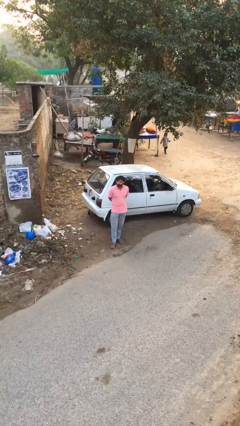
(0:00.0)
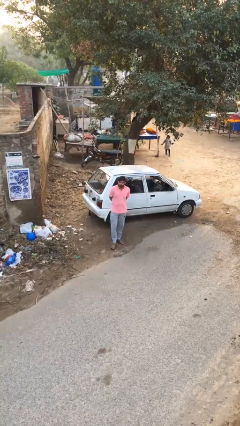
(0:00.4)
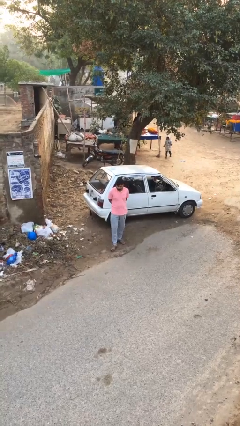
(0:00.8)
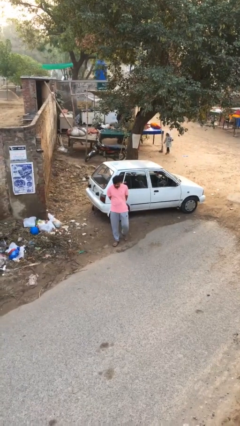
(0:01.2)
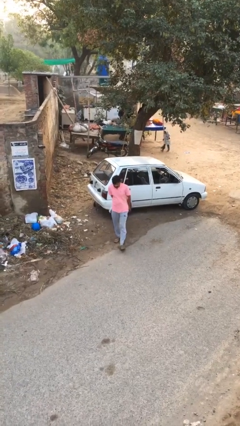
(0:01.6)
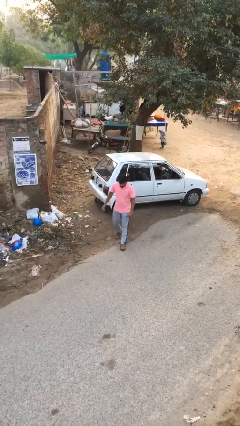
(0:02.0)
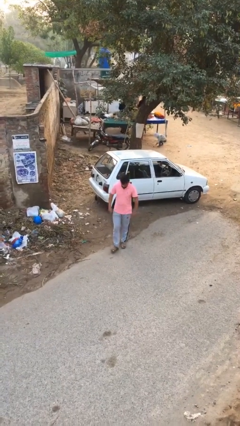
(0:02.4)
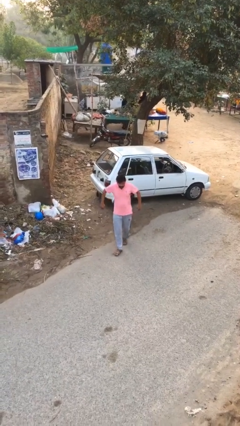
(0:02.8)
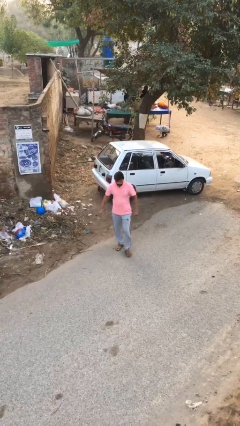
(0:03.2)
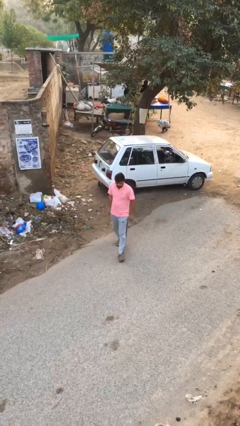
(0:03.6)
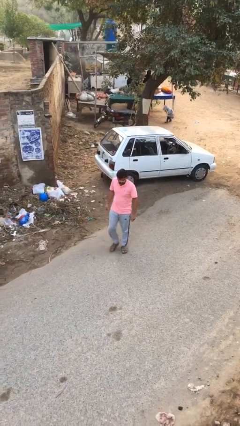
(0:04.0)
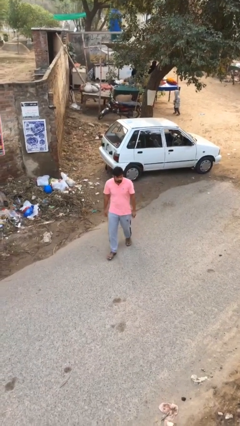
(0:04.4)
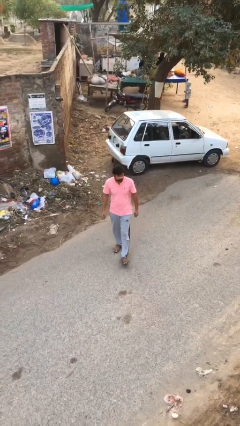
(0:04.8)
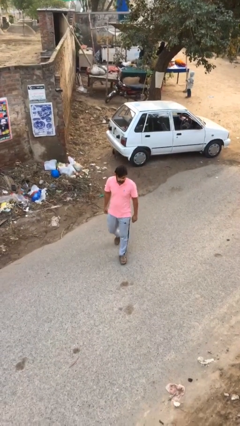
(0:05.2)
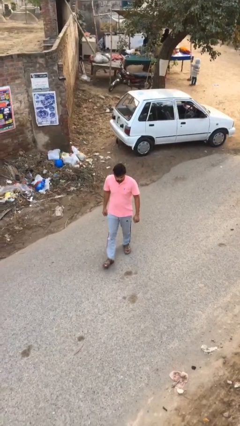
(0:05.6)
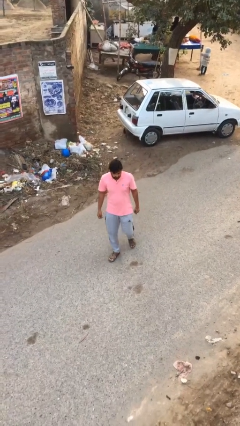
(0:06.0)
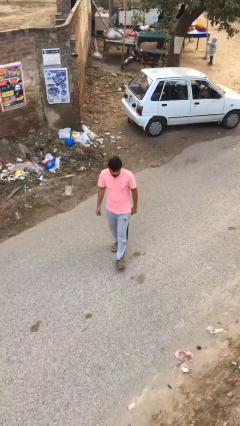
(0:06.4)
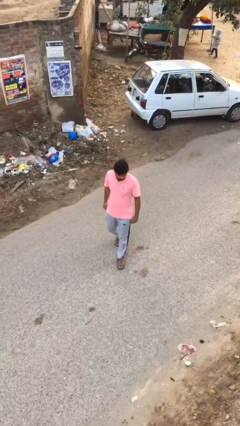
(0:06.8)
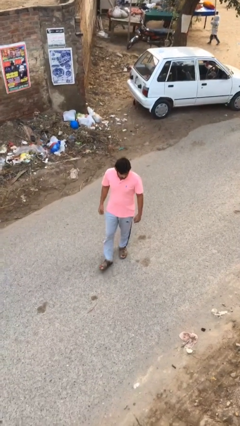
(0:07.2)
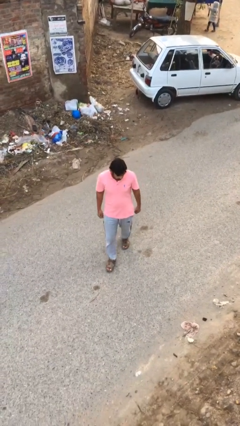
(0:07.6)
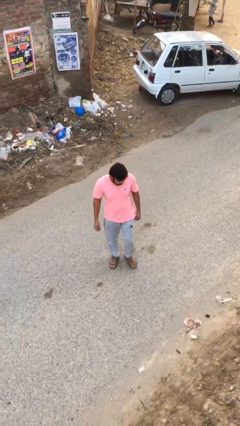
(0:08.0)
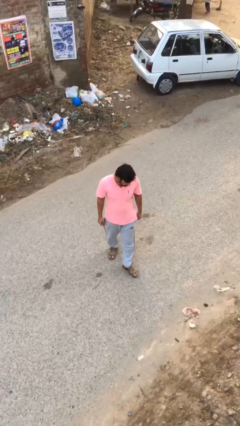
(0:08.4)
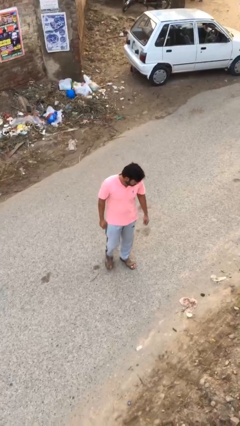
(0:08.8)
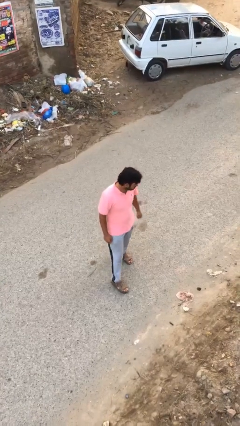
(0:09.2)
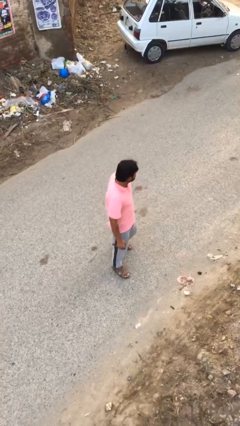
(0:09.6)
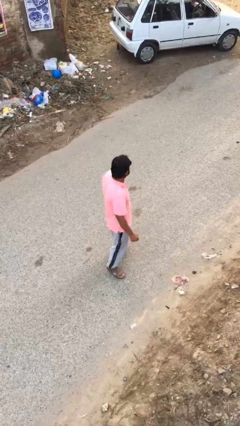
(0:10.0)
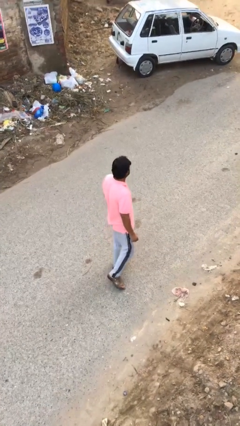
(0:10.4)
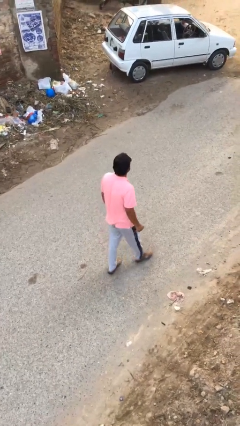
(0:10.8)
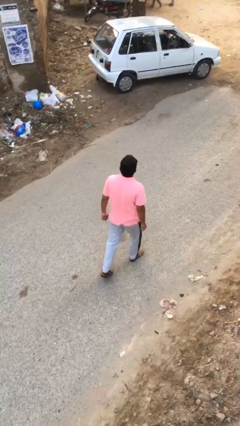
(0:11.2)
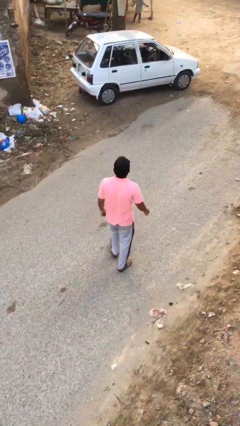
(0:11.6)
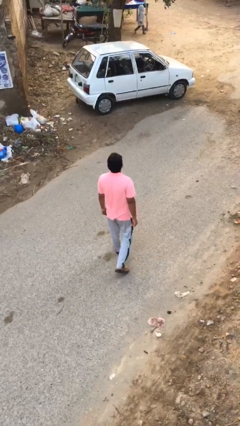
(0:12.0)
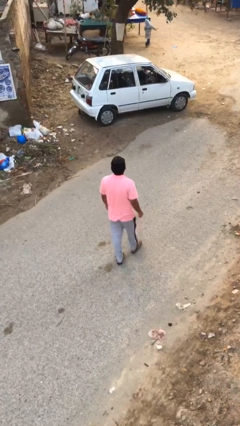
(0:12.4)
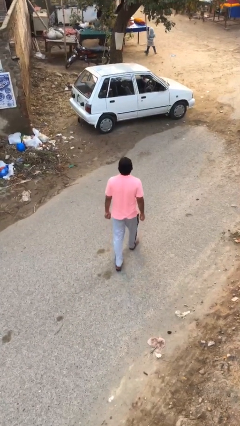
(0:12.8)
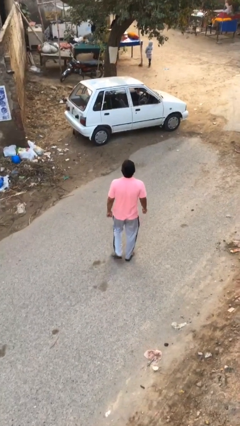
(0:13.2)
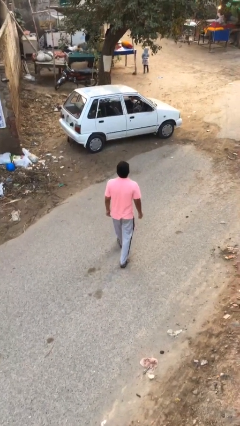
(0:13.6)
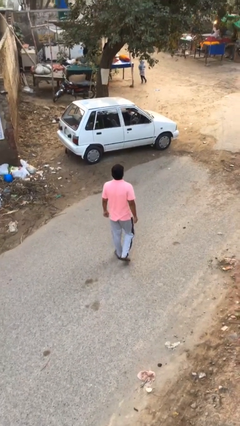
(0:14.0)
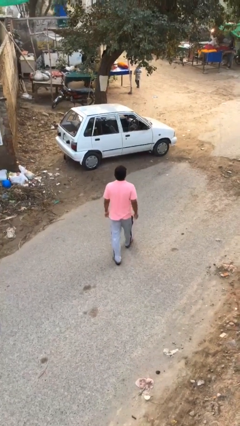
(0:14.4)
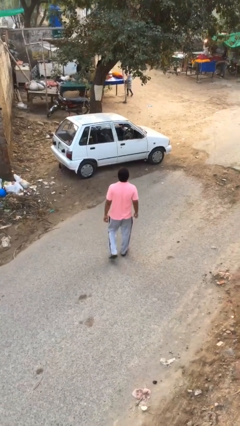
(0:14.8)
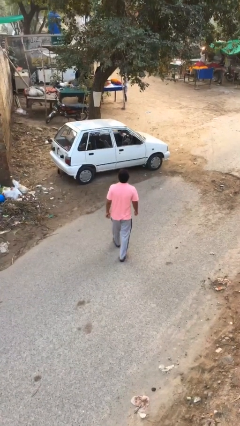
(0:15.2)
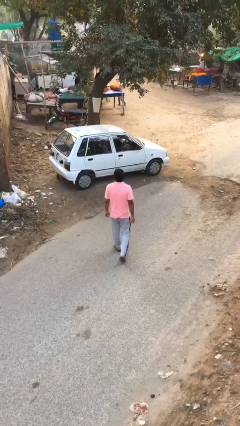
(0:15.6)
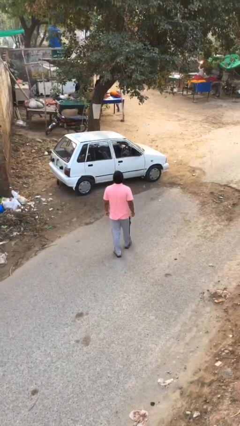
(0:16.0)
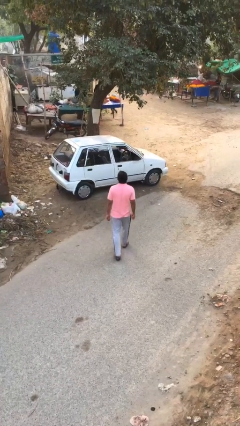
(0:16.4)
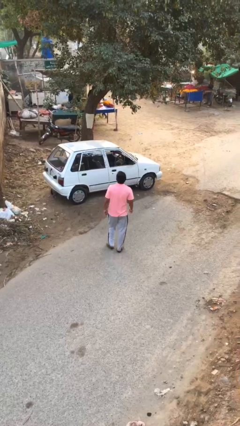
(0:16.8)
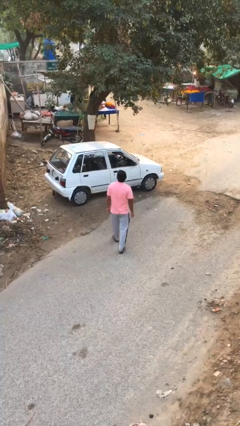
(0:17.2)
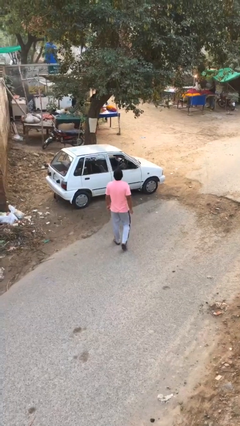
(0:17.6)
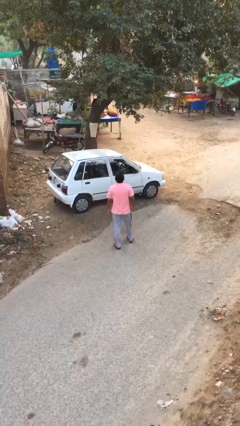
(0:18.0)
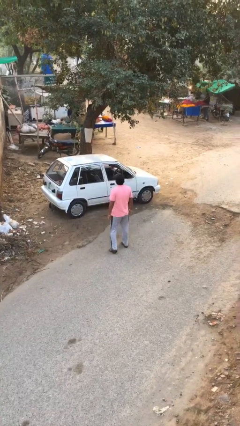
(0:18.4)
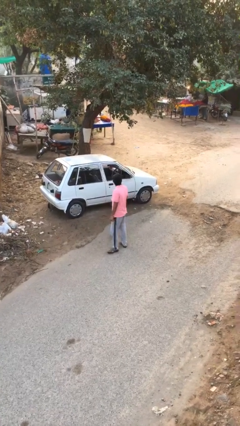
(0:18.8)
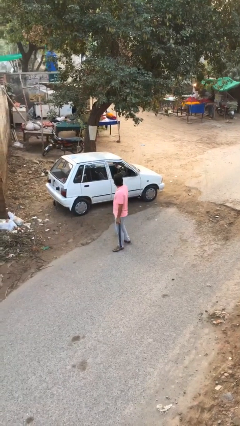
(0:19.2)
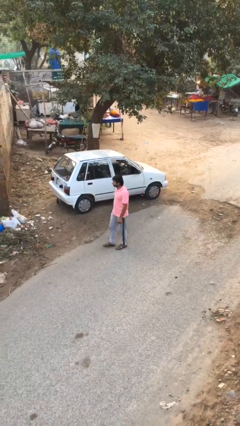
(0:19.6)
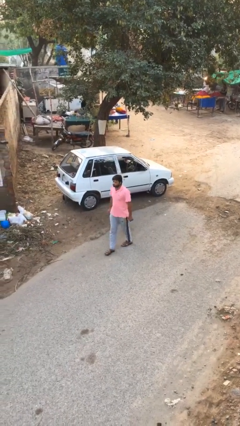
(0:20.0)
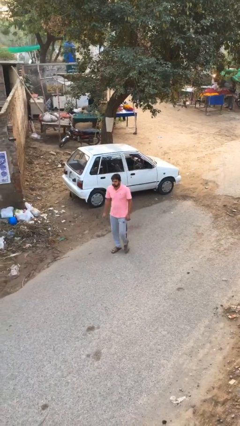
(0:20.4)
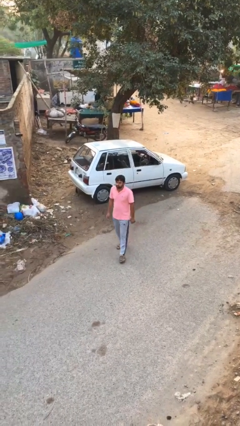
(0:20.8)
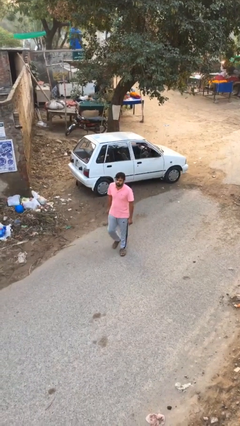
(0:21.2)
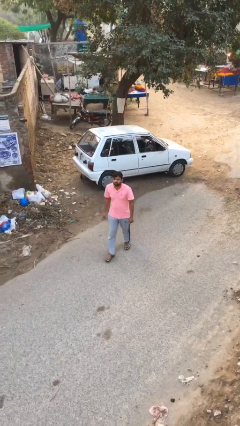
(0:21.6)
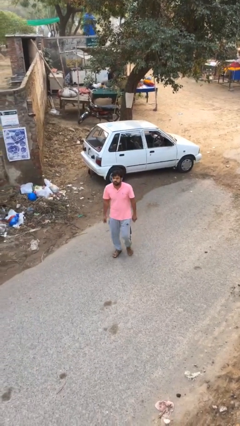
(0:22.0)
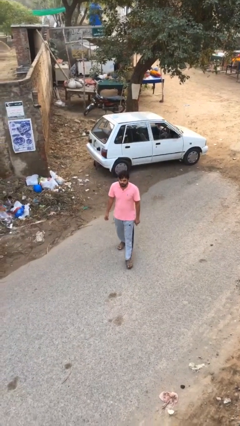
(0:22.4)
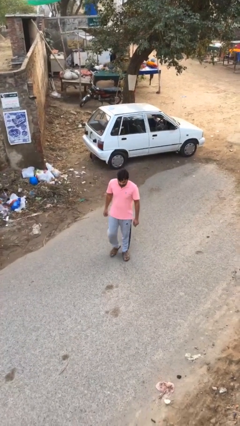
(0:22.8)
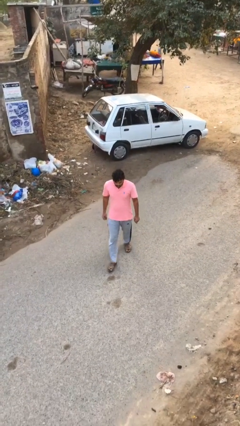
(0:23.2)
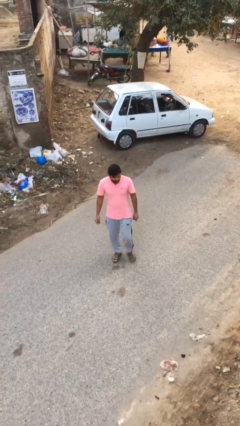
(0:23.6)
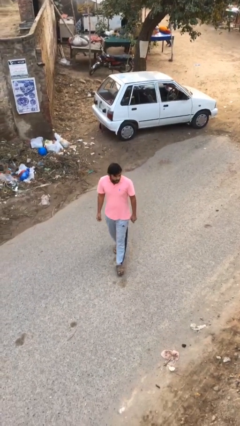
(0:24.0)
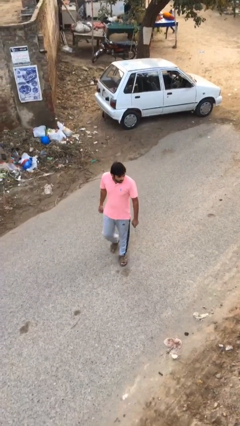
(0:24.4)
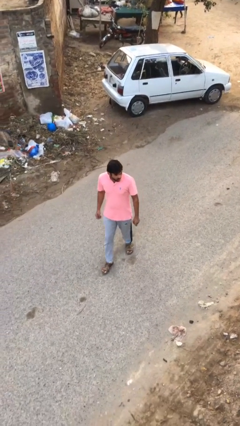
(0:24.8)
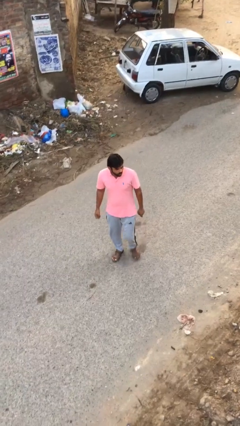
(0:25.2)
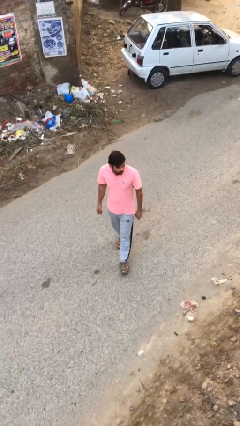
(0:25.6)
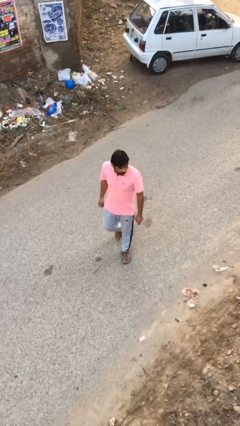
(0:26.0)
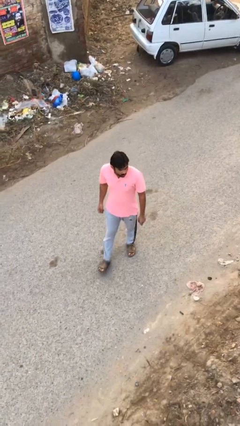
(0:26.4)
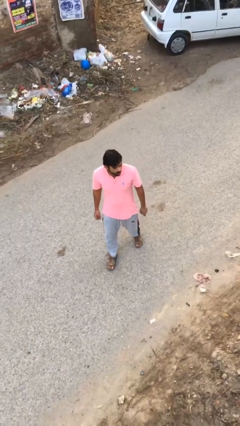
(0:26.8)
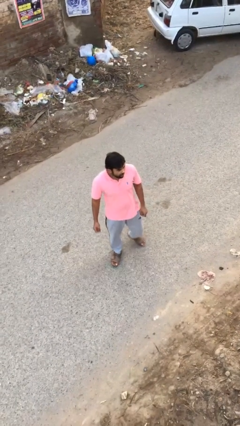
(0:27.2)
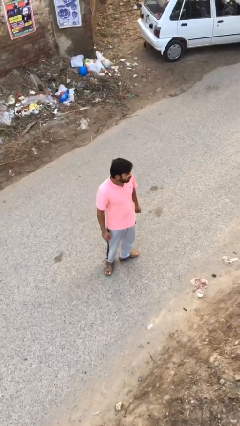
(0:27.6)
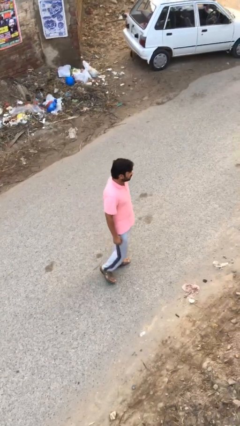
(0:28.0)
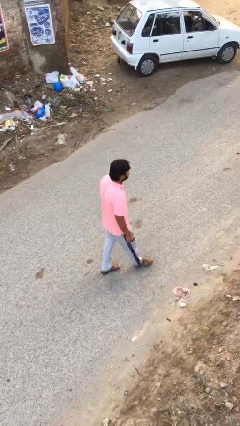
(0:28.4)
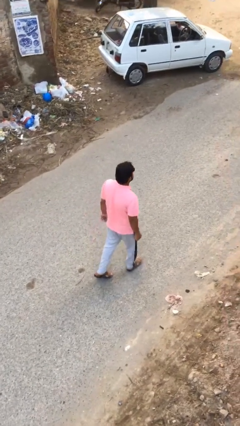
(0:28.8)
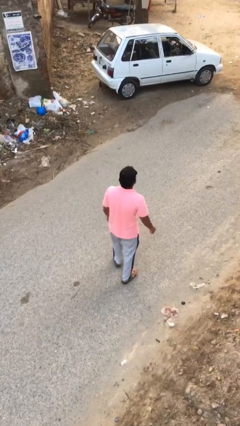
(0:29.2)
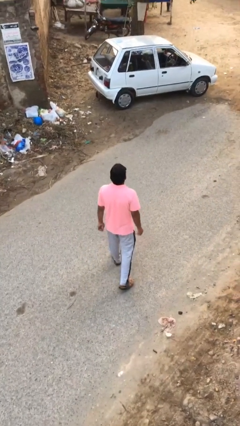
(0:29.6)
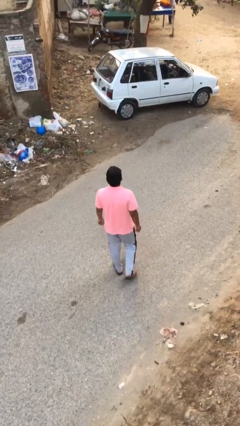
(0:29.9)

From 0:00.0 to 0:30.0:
person walks

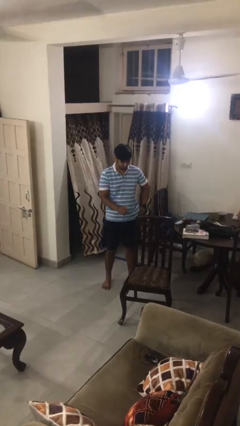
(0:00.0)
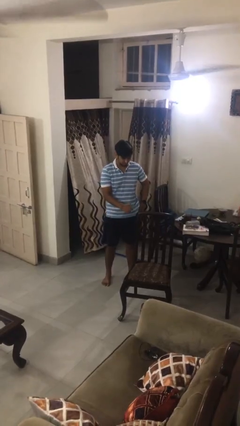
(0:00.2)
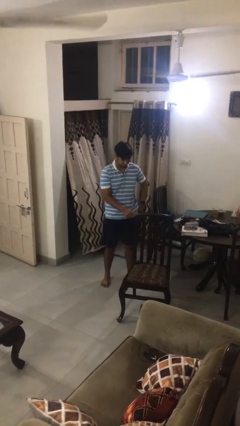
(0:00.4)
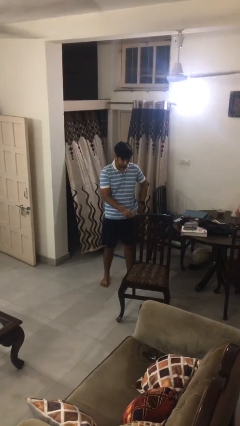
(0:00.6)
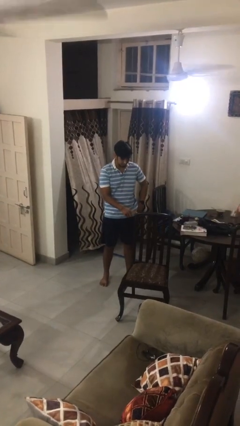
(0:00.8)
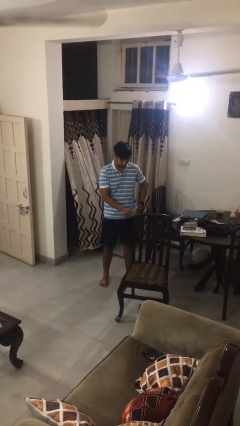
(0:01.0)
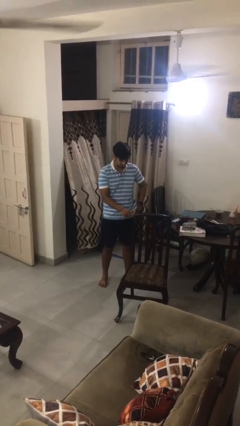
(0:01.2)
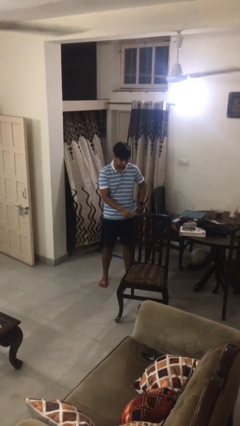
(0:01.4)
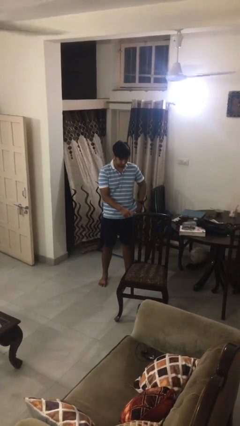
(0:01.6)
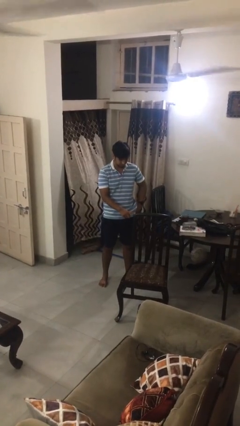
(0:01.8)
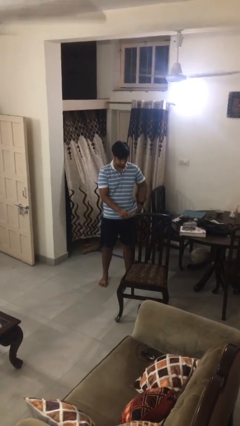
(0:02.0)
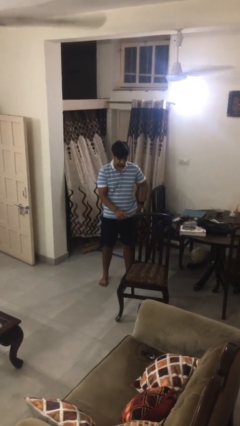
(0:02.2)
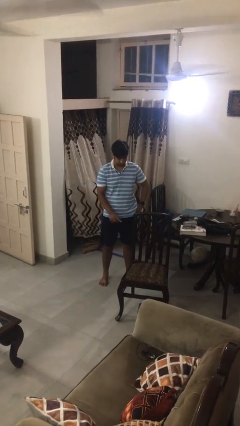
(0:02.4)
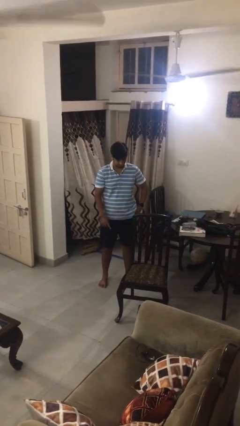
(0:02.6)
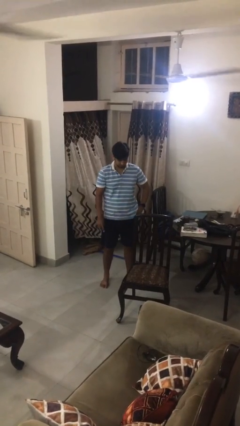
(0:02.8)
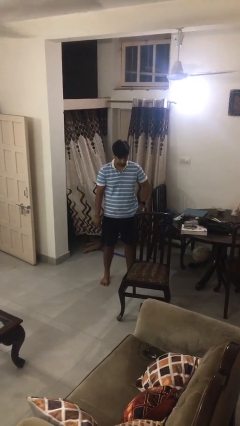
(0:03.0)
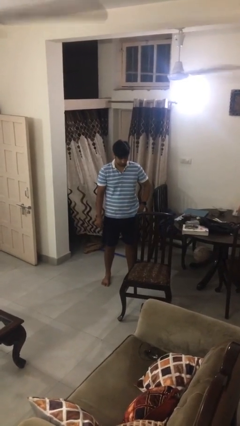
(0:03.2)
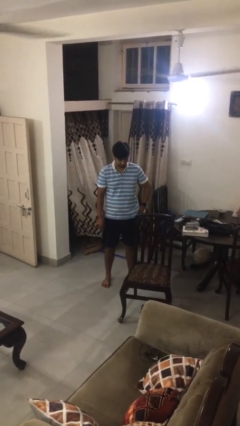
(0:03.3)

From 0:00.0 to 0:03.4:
person taps object with finger
